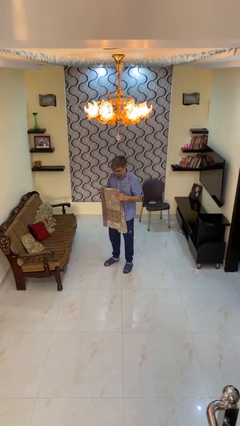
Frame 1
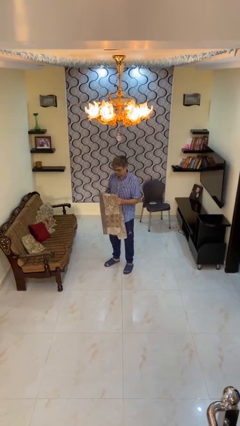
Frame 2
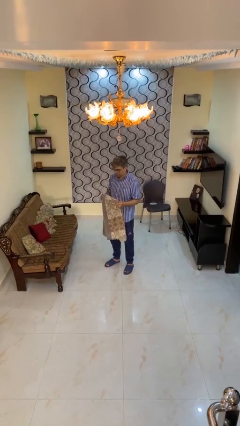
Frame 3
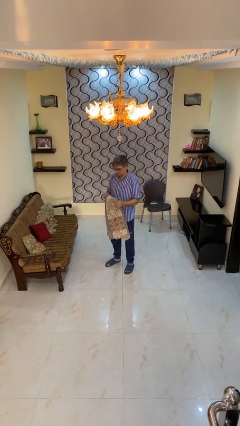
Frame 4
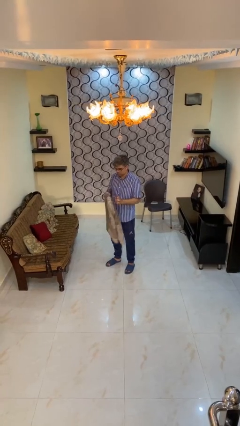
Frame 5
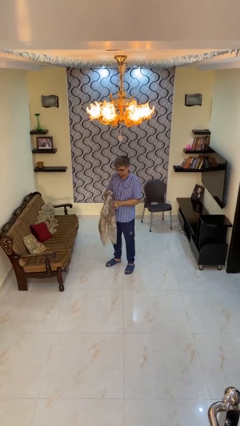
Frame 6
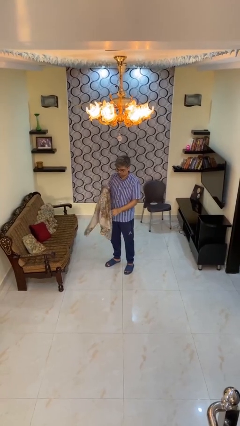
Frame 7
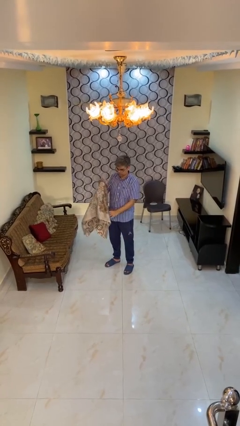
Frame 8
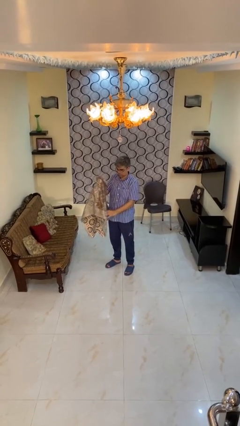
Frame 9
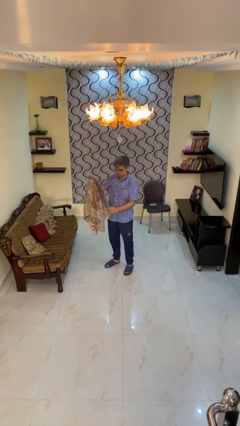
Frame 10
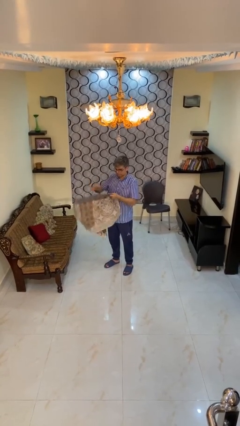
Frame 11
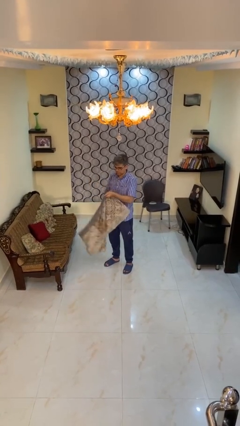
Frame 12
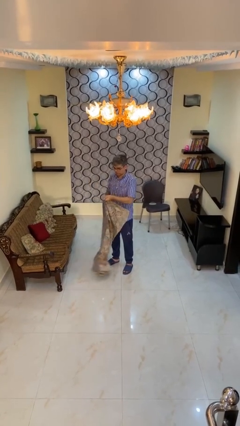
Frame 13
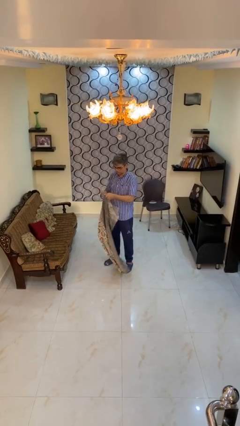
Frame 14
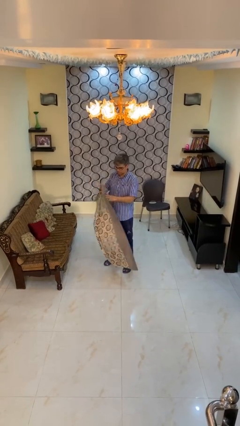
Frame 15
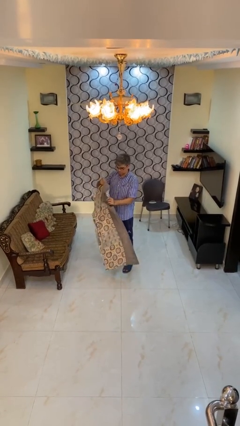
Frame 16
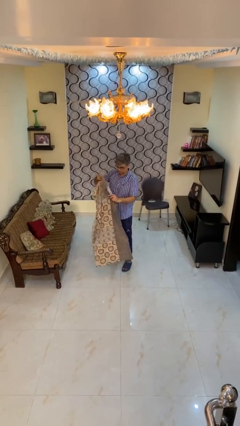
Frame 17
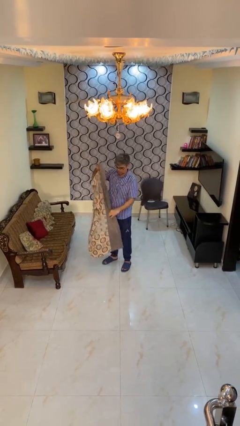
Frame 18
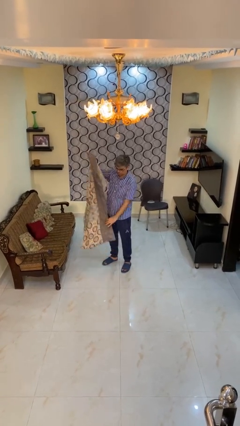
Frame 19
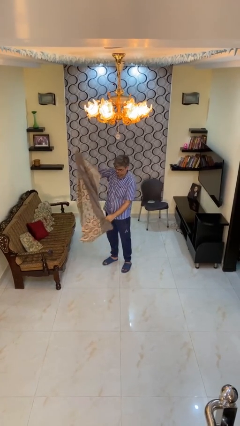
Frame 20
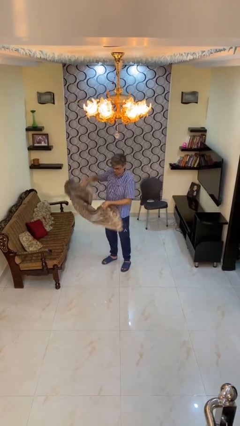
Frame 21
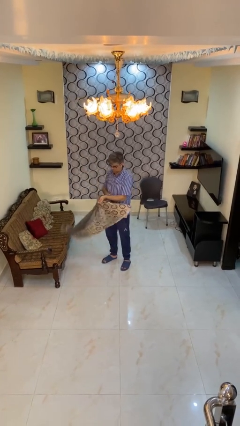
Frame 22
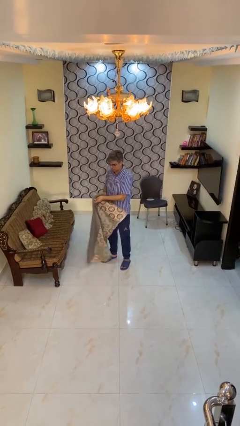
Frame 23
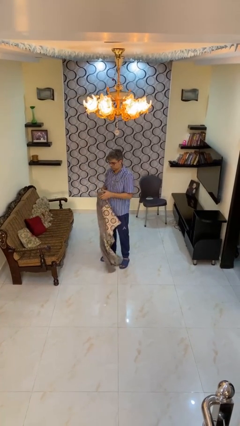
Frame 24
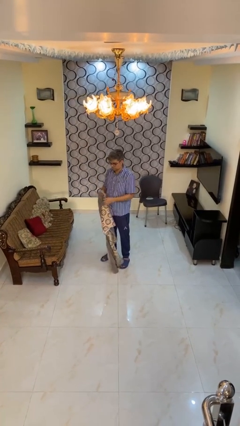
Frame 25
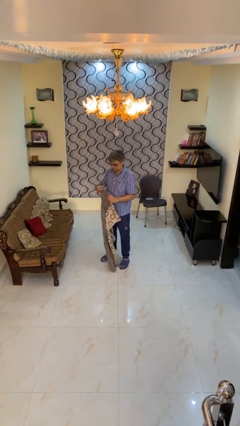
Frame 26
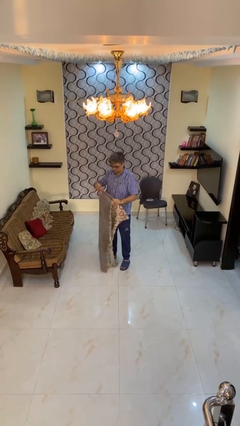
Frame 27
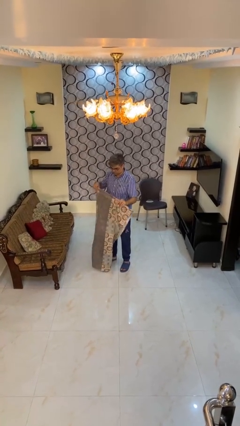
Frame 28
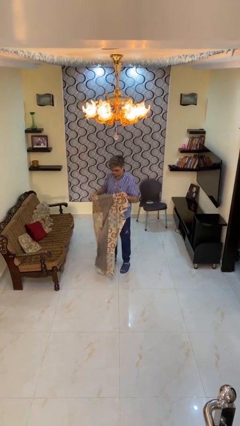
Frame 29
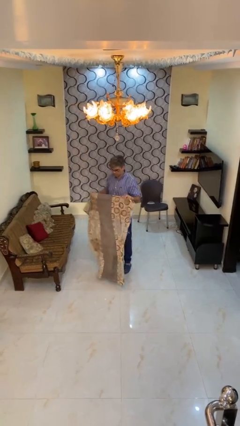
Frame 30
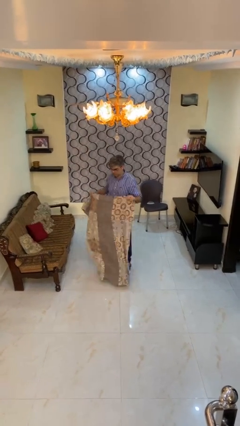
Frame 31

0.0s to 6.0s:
person unfolds blanket

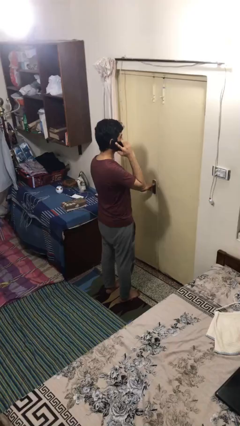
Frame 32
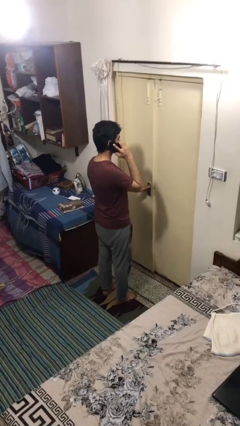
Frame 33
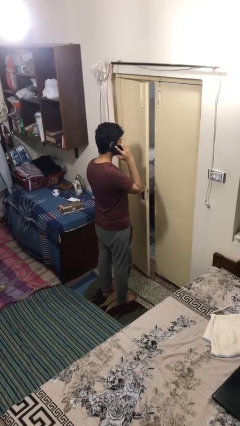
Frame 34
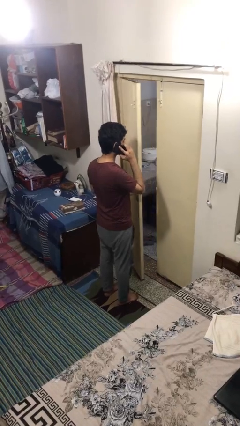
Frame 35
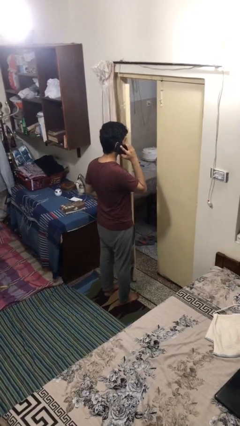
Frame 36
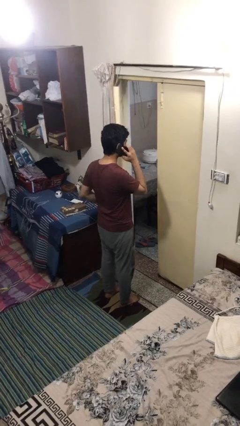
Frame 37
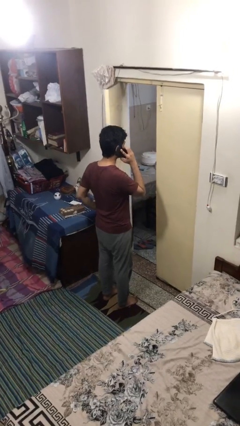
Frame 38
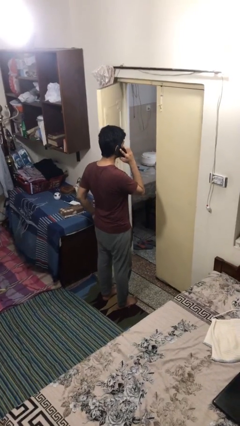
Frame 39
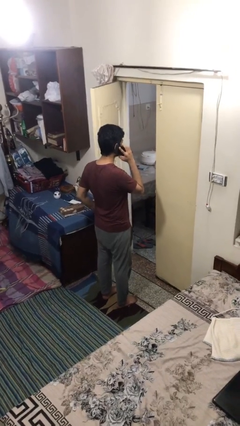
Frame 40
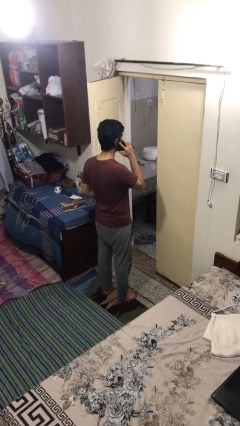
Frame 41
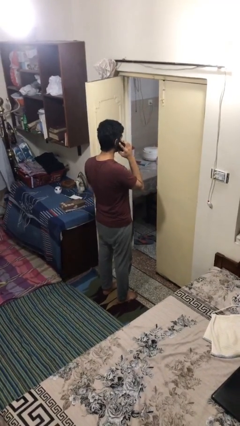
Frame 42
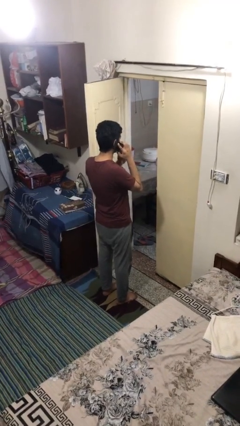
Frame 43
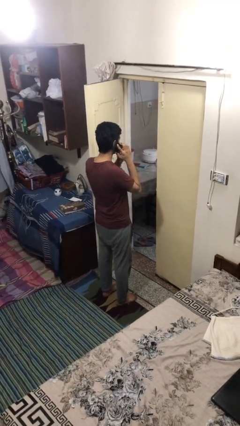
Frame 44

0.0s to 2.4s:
person opens facility door

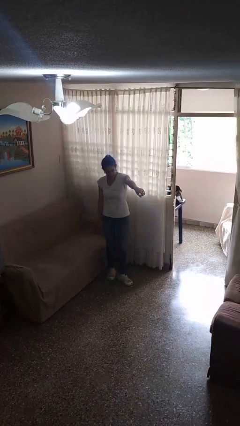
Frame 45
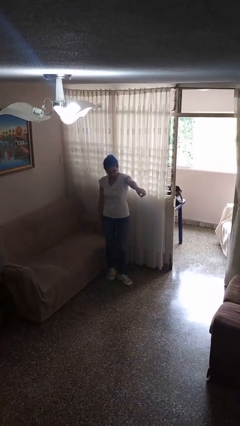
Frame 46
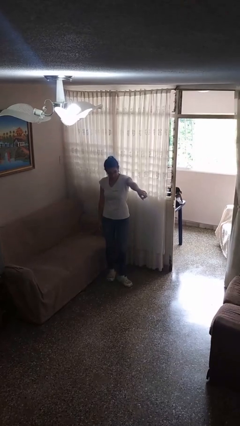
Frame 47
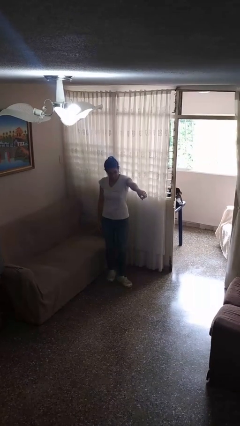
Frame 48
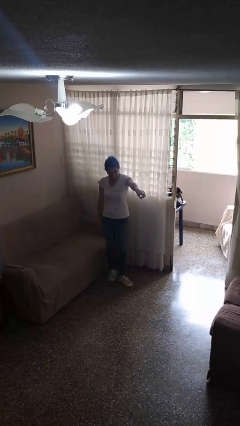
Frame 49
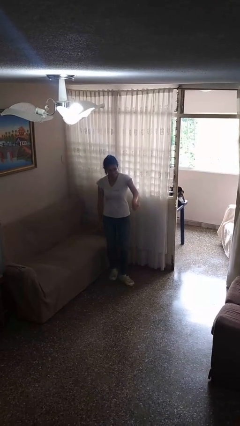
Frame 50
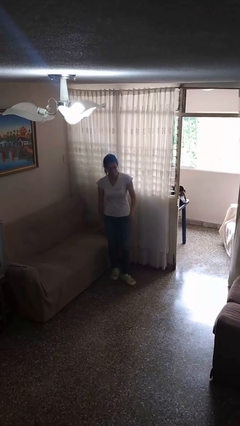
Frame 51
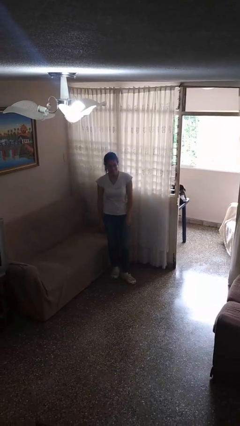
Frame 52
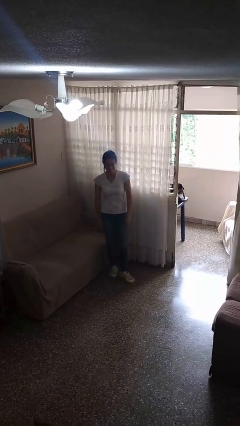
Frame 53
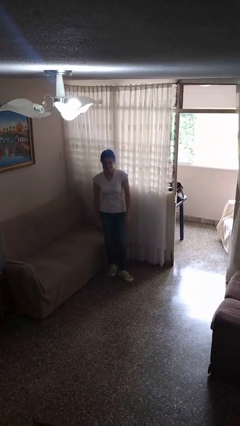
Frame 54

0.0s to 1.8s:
person points at person

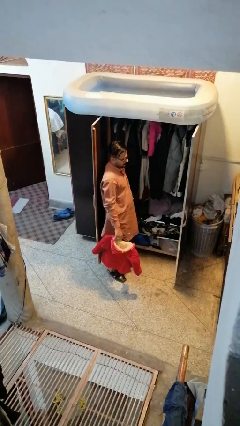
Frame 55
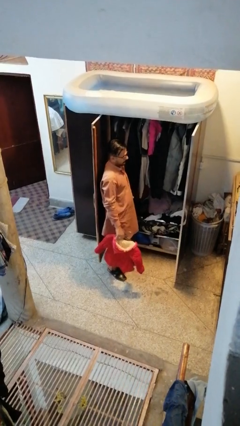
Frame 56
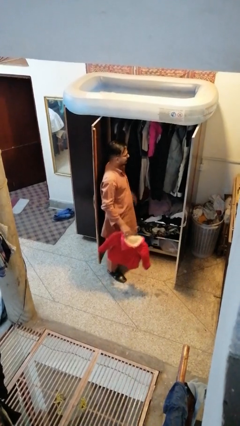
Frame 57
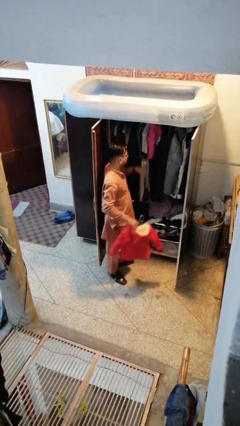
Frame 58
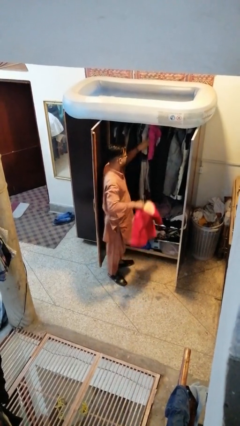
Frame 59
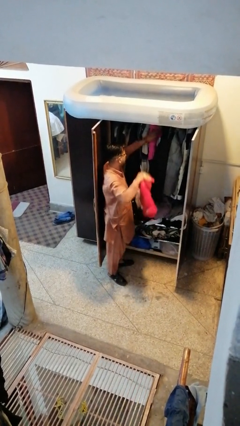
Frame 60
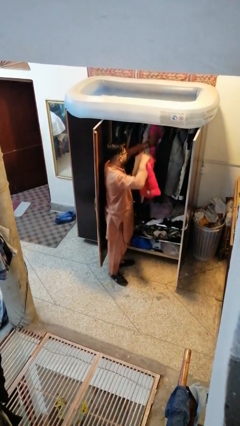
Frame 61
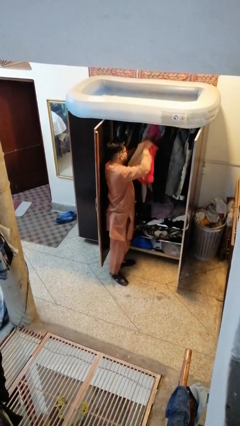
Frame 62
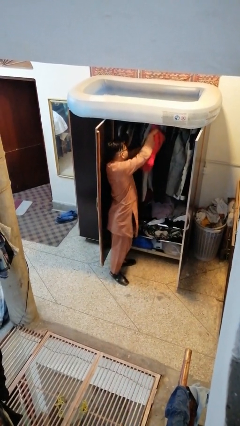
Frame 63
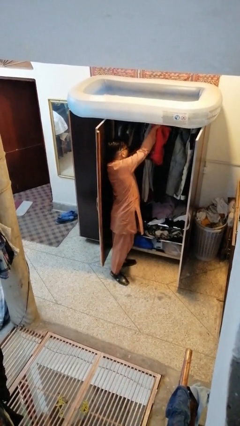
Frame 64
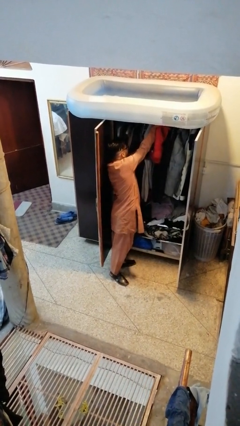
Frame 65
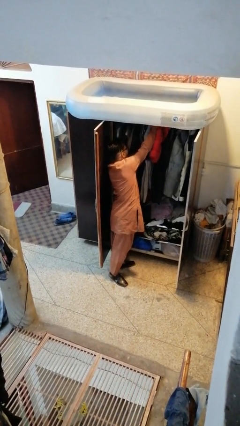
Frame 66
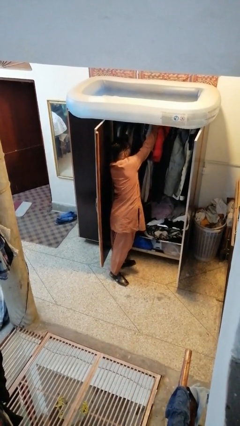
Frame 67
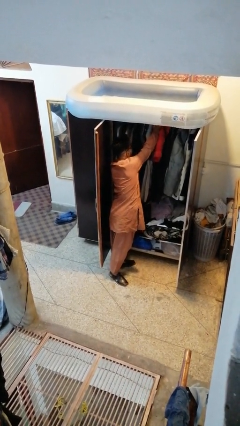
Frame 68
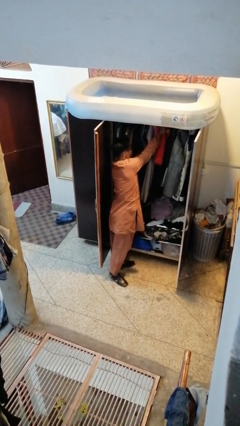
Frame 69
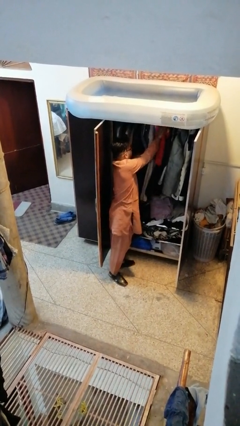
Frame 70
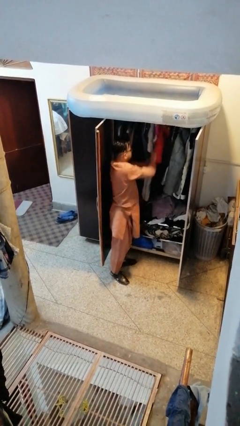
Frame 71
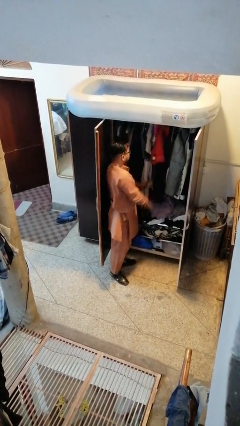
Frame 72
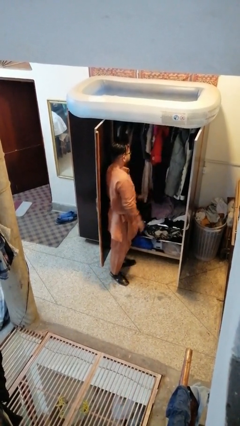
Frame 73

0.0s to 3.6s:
person puts clothes into closet

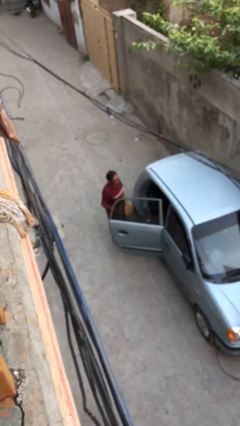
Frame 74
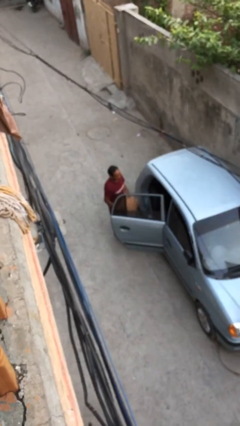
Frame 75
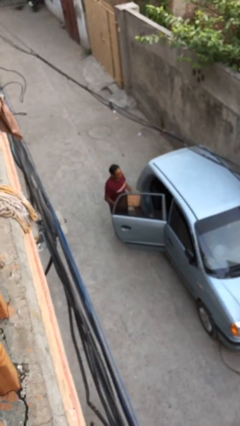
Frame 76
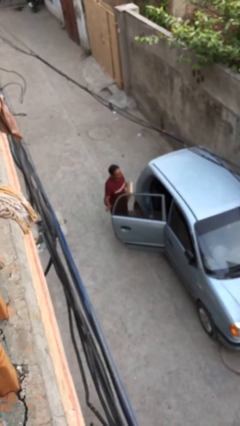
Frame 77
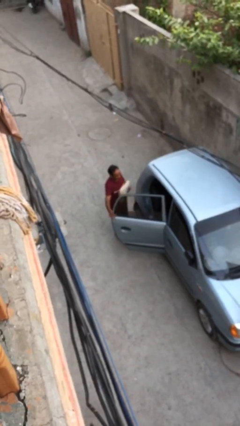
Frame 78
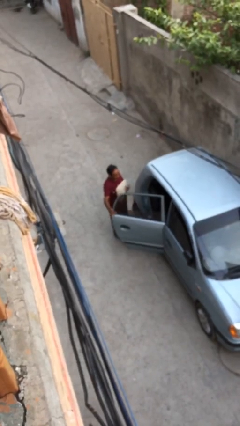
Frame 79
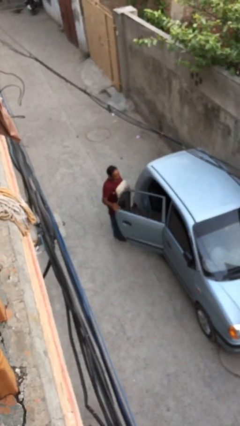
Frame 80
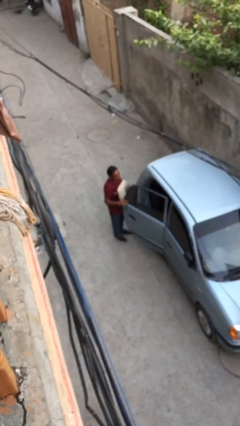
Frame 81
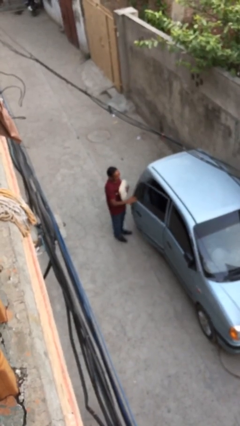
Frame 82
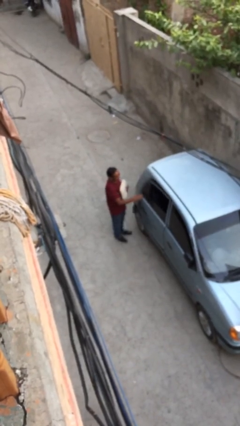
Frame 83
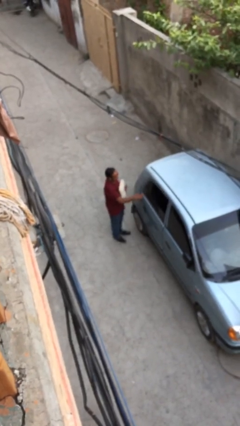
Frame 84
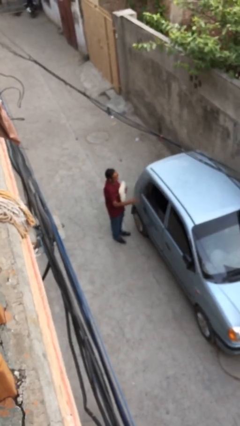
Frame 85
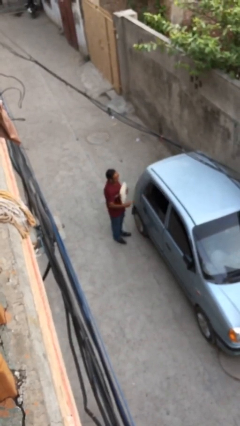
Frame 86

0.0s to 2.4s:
person closes car door

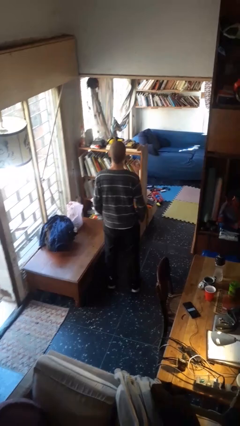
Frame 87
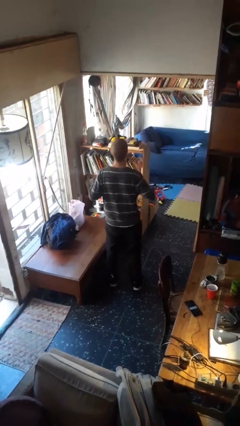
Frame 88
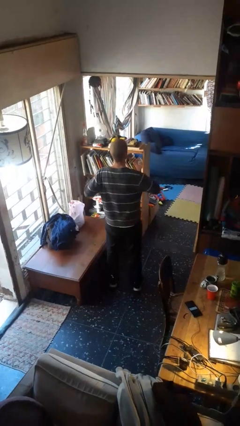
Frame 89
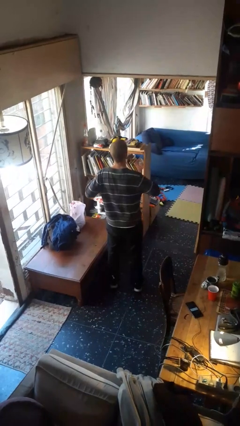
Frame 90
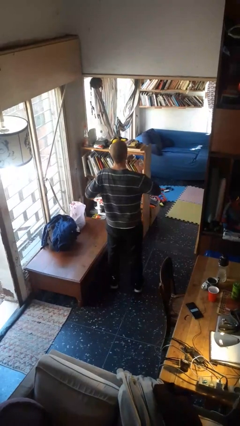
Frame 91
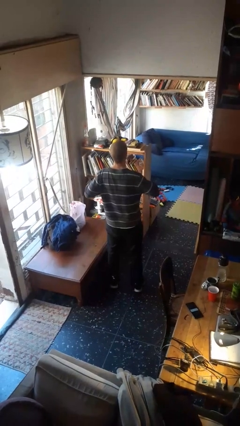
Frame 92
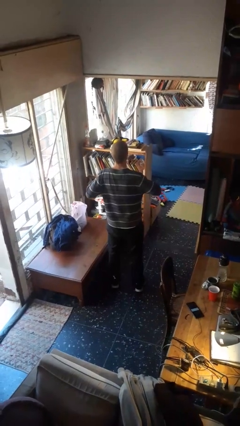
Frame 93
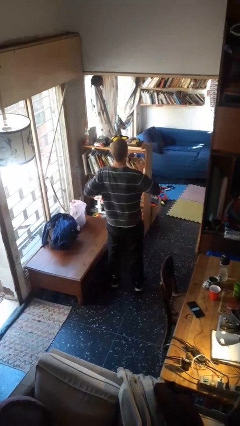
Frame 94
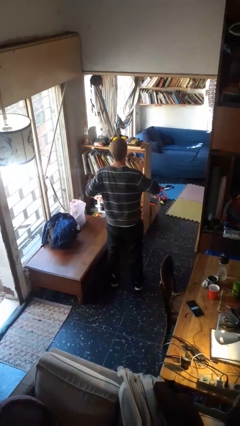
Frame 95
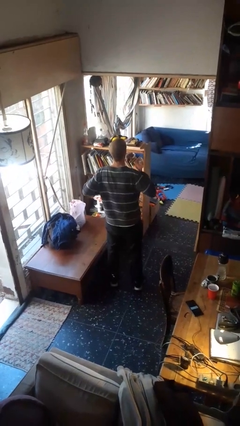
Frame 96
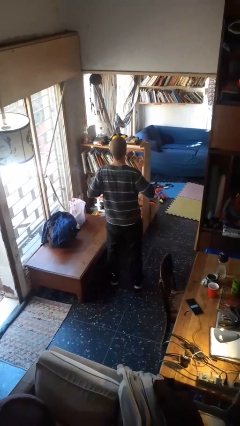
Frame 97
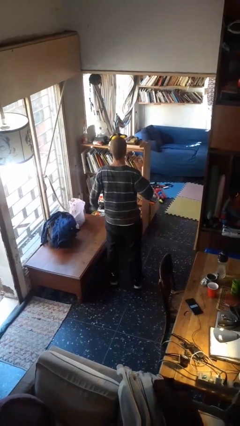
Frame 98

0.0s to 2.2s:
person drums on chest
